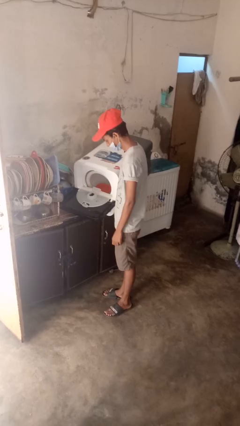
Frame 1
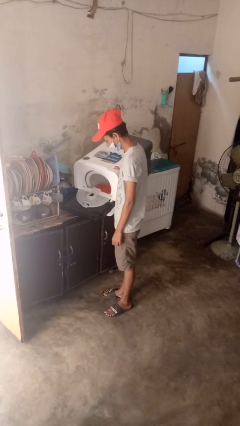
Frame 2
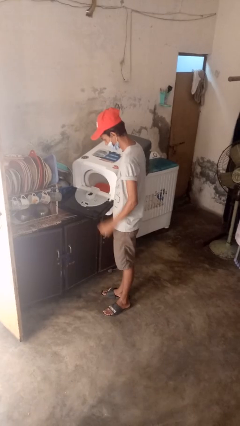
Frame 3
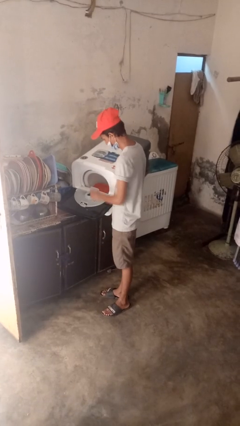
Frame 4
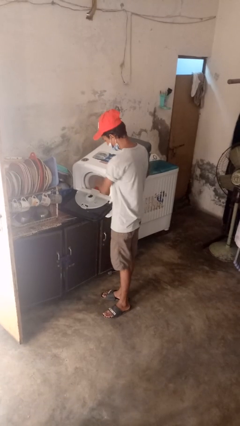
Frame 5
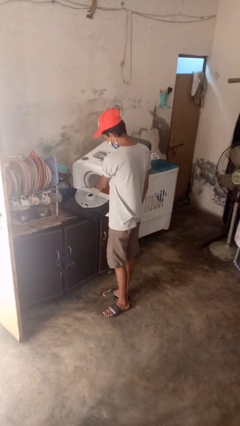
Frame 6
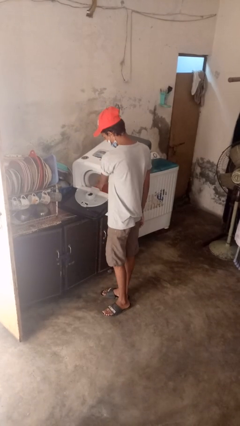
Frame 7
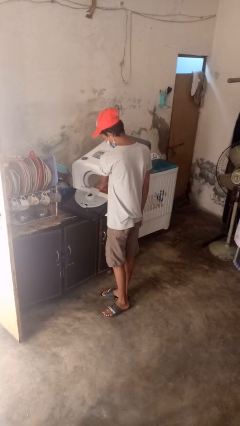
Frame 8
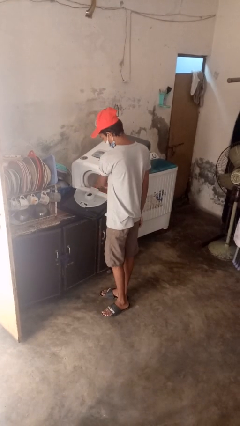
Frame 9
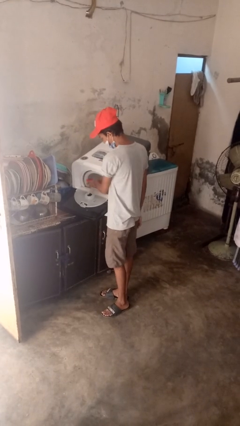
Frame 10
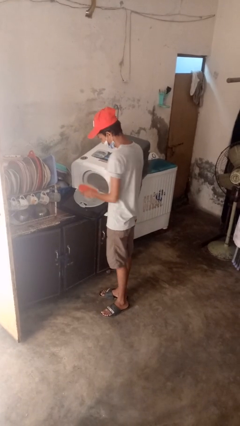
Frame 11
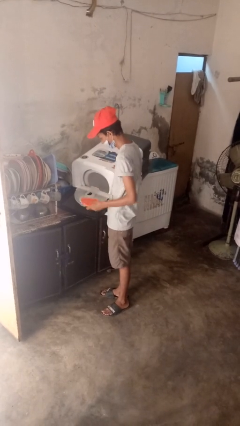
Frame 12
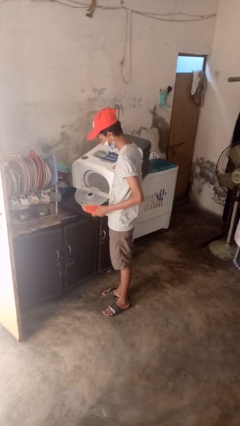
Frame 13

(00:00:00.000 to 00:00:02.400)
person unloads dishwasher

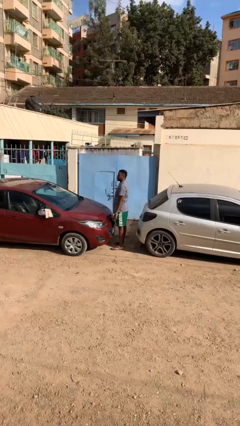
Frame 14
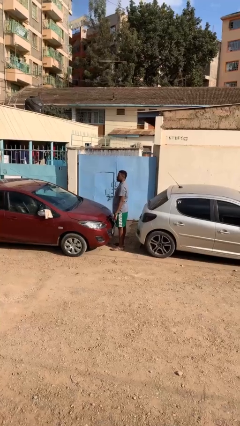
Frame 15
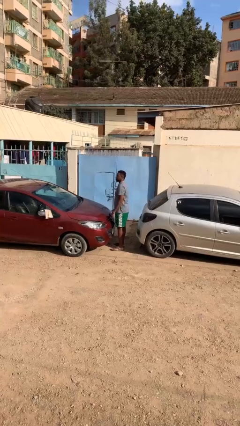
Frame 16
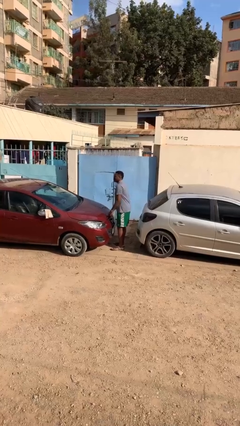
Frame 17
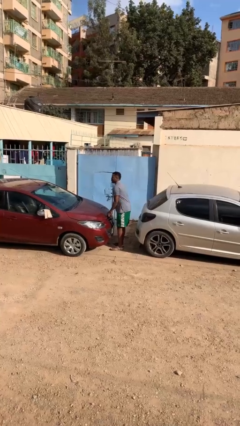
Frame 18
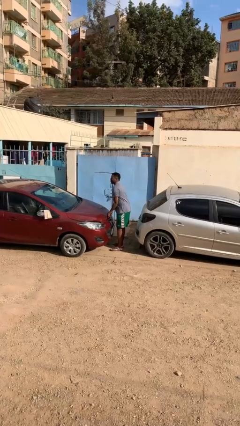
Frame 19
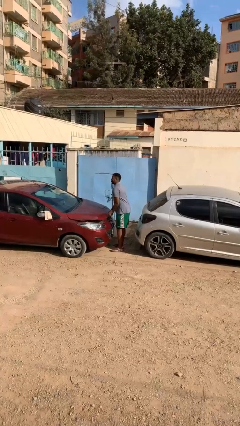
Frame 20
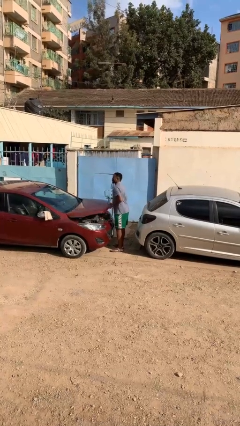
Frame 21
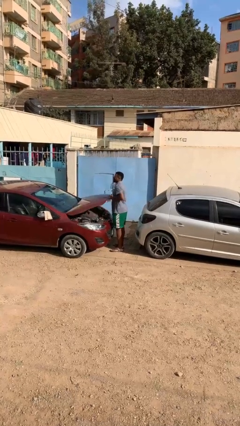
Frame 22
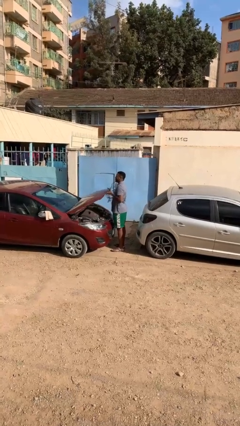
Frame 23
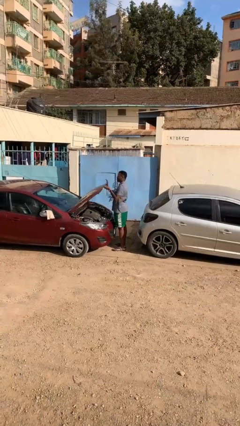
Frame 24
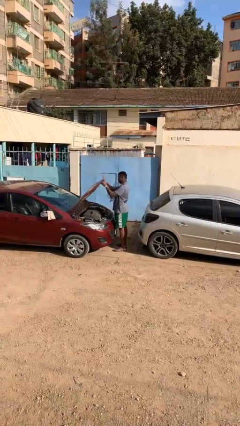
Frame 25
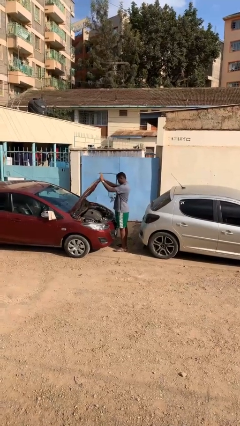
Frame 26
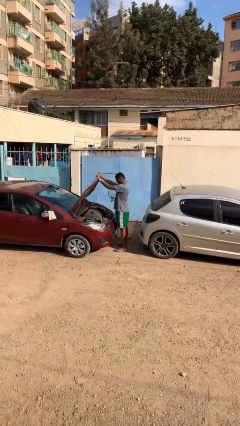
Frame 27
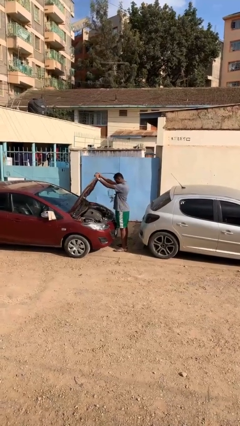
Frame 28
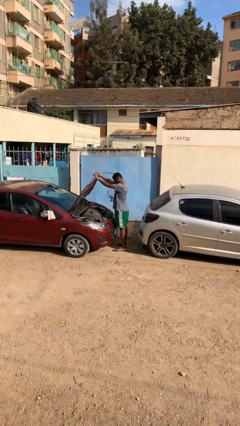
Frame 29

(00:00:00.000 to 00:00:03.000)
person opens car hood

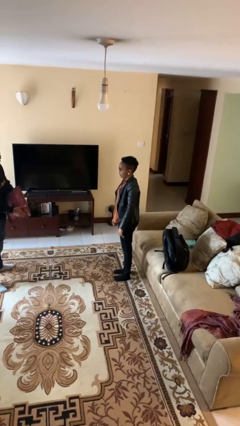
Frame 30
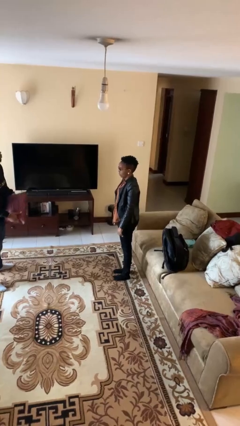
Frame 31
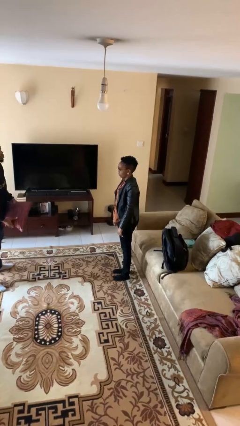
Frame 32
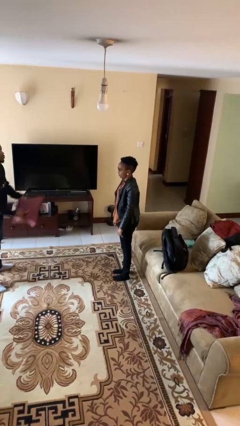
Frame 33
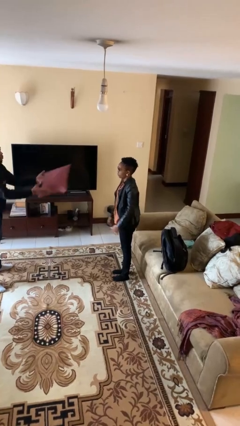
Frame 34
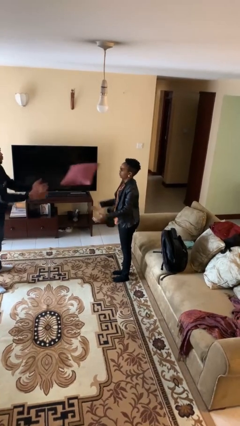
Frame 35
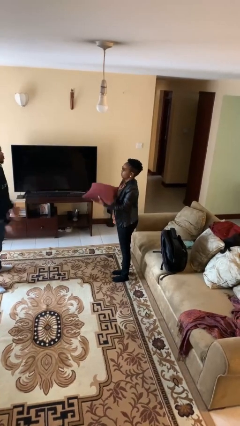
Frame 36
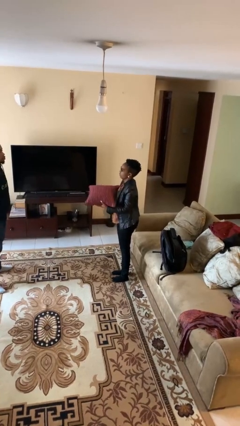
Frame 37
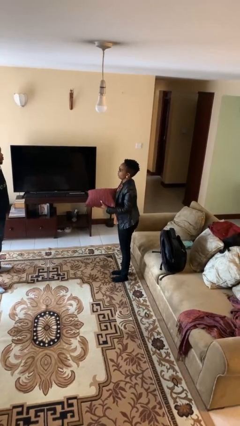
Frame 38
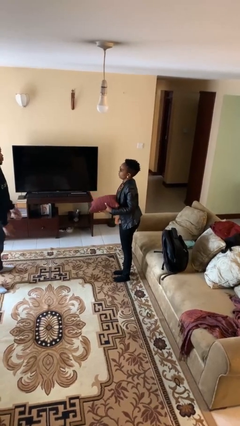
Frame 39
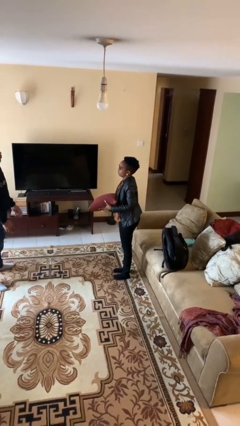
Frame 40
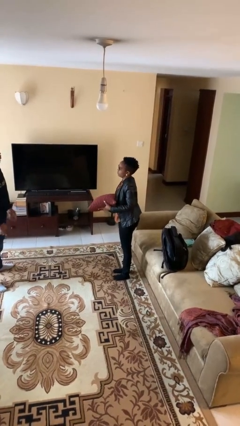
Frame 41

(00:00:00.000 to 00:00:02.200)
person catches object from person

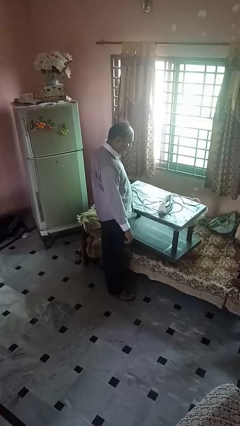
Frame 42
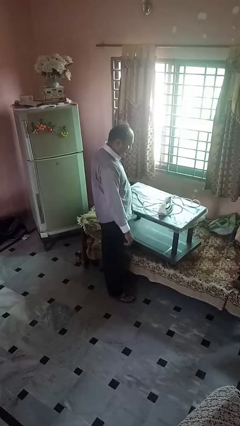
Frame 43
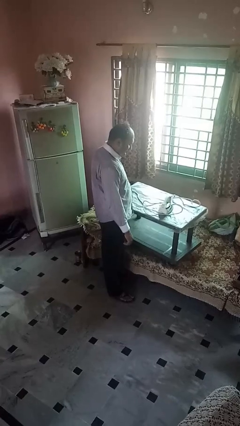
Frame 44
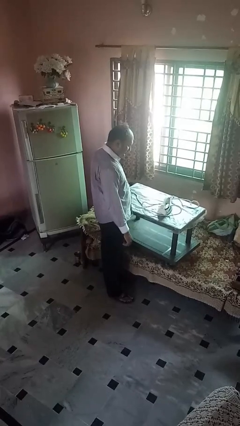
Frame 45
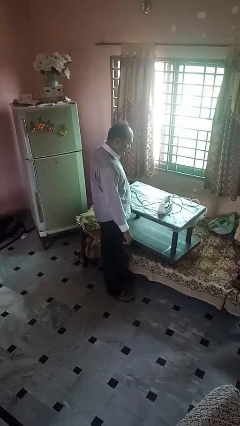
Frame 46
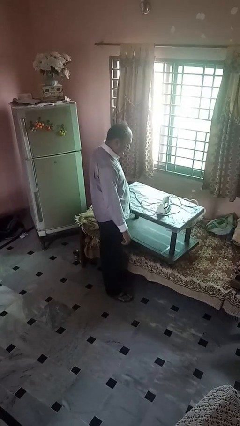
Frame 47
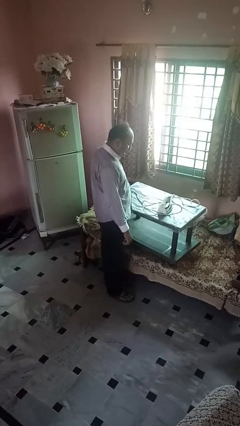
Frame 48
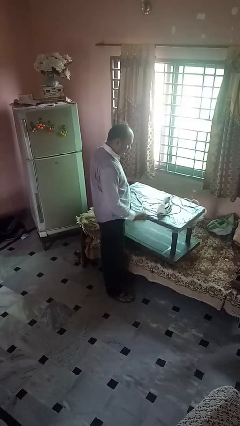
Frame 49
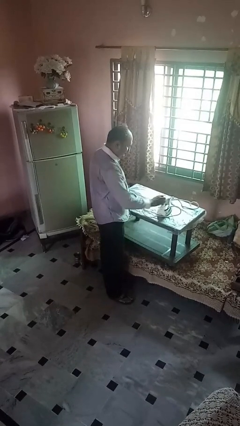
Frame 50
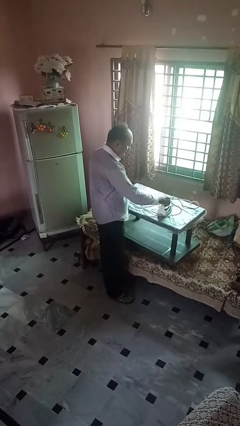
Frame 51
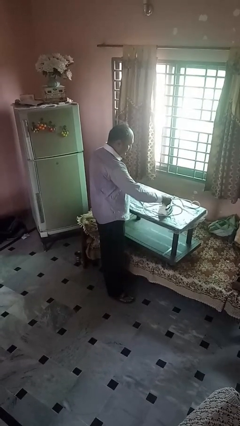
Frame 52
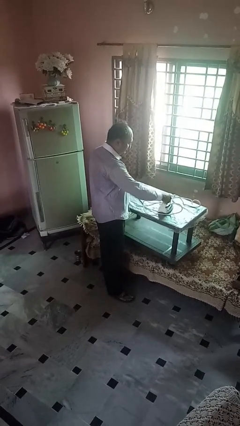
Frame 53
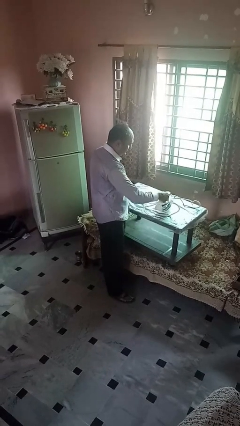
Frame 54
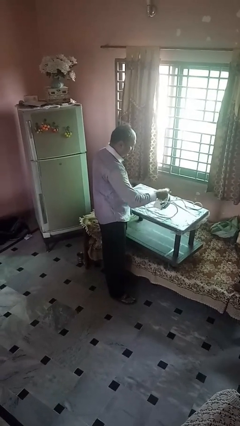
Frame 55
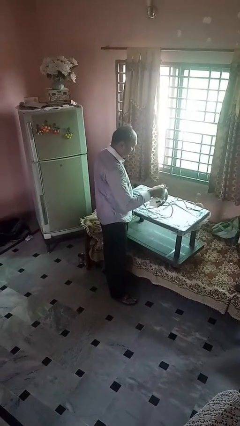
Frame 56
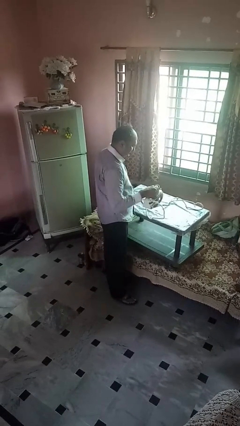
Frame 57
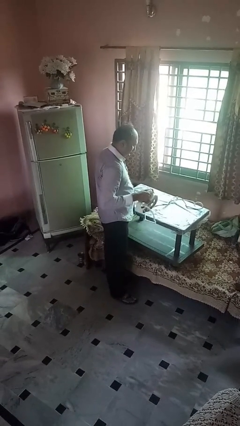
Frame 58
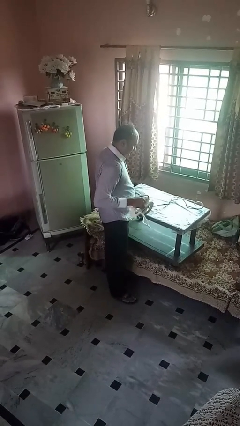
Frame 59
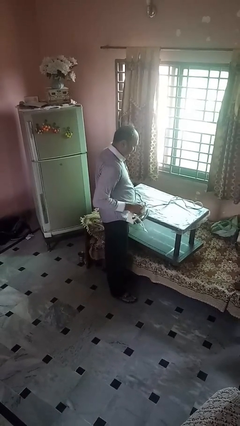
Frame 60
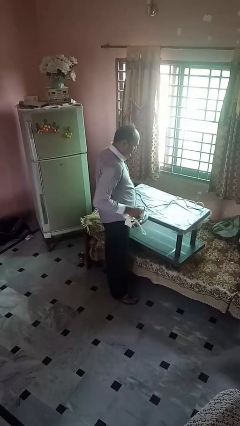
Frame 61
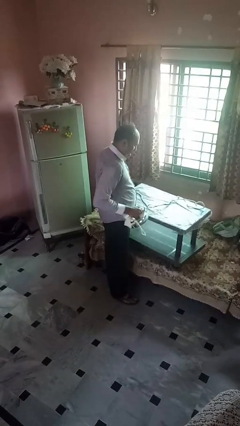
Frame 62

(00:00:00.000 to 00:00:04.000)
person picks up object from countertop

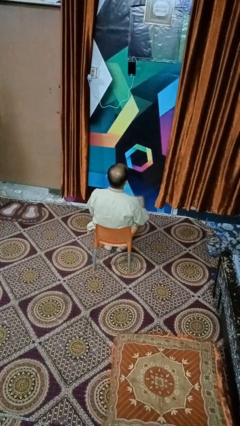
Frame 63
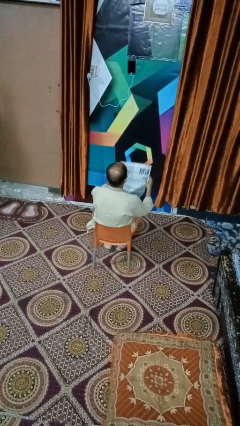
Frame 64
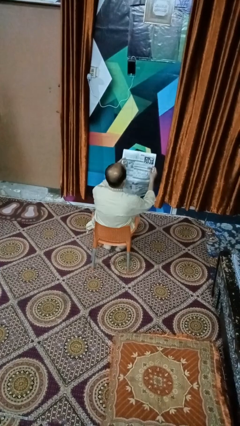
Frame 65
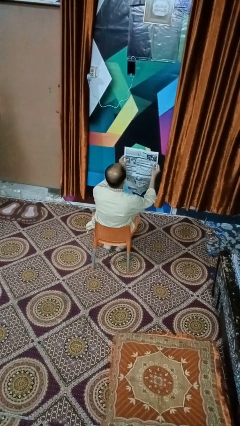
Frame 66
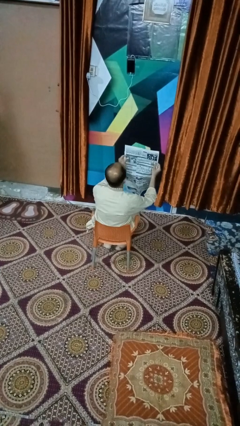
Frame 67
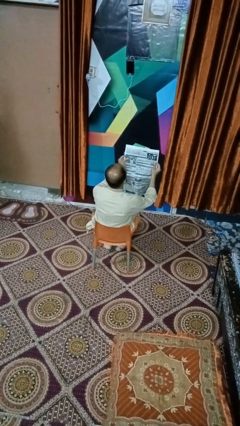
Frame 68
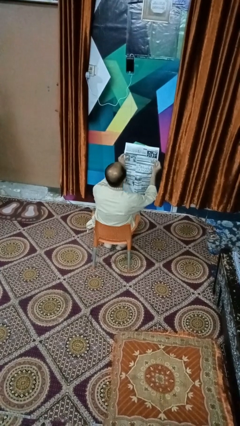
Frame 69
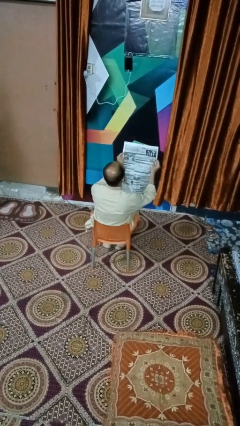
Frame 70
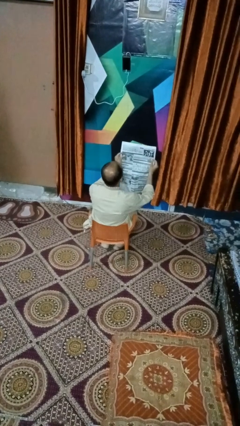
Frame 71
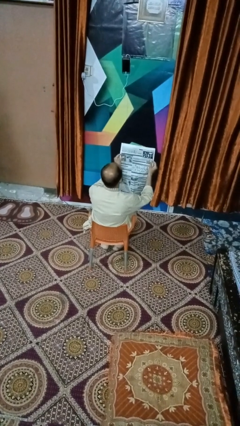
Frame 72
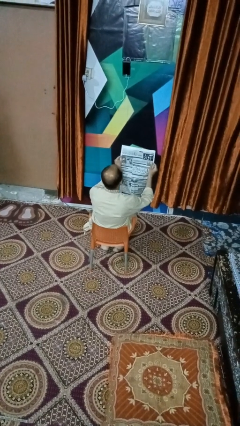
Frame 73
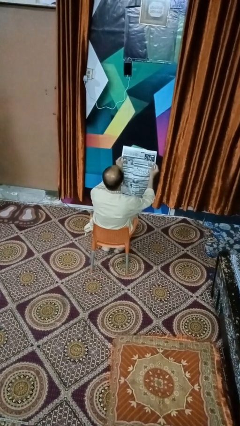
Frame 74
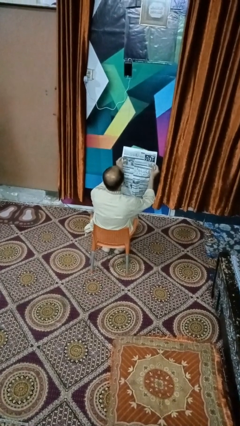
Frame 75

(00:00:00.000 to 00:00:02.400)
person reads newspaper

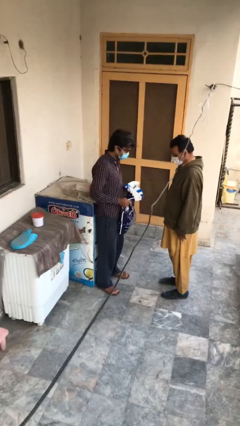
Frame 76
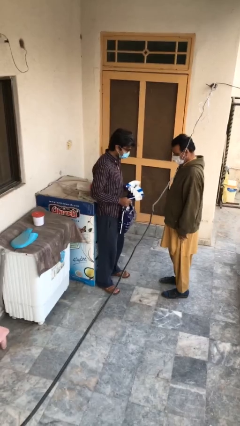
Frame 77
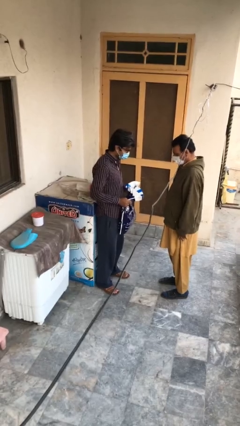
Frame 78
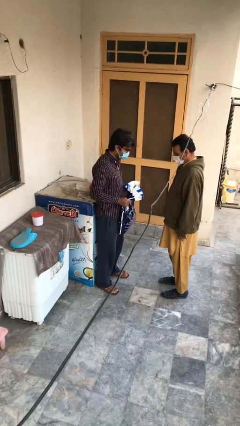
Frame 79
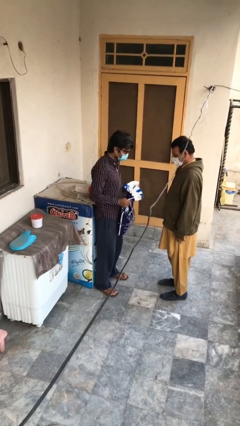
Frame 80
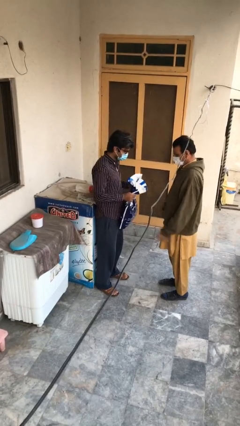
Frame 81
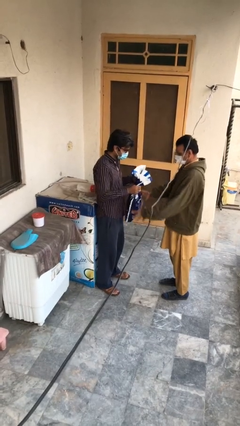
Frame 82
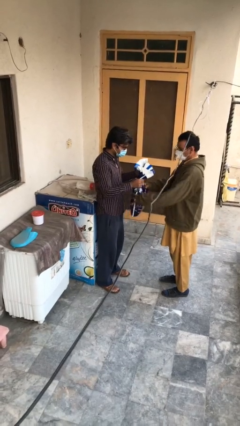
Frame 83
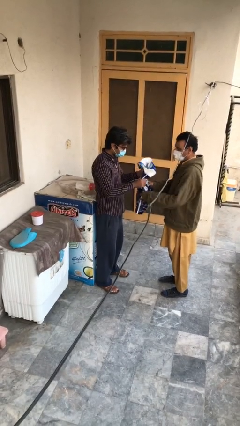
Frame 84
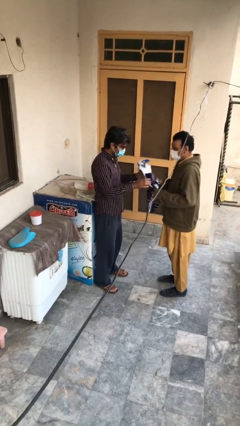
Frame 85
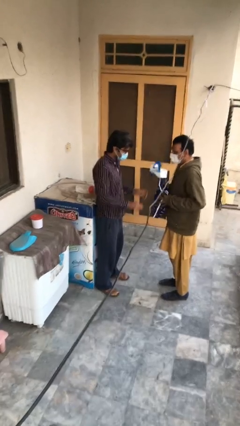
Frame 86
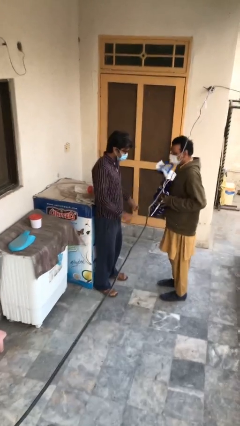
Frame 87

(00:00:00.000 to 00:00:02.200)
person transfers object to person

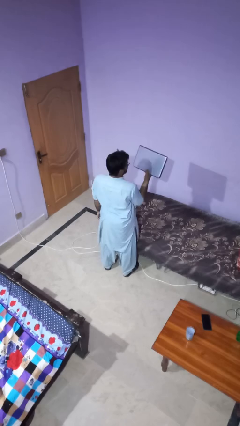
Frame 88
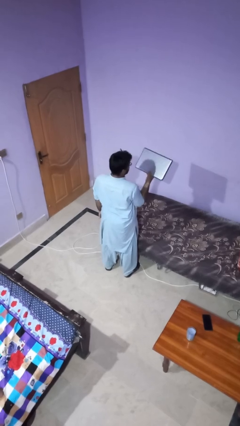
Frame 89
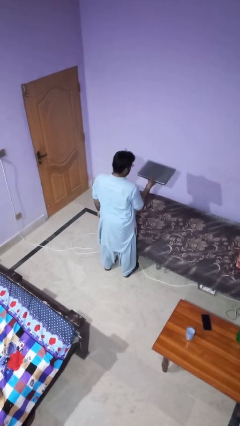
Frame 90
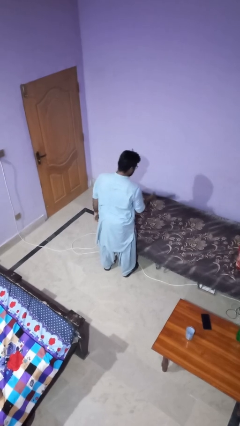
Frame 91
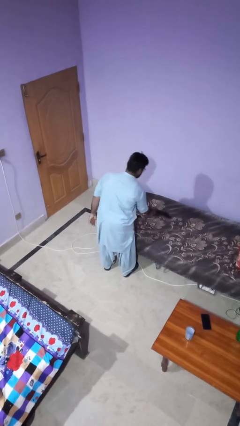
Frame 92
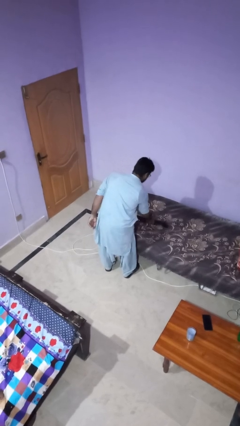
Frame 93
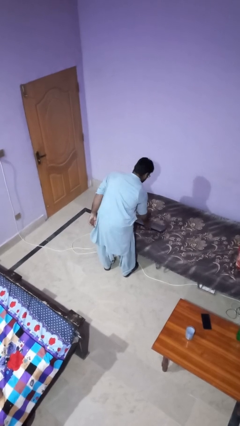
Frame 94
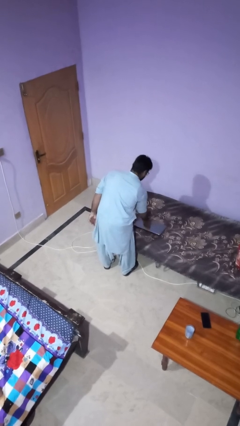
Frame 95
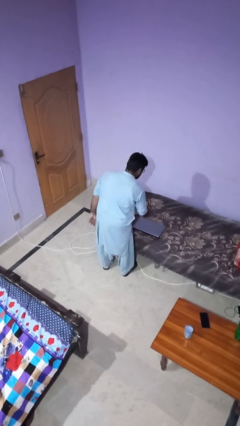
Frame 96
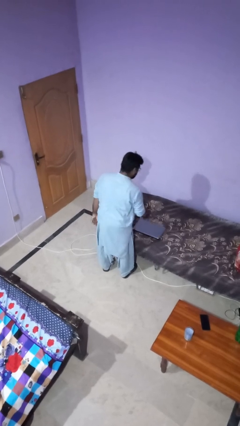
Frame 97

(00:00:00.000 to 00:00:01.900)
person puts down object on bed
